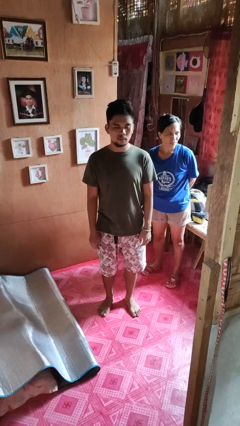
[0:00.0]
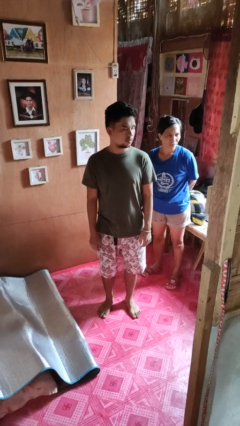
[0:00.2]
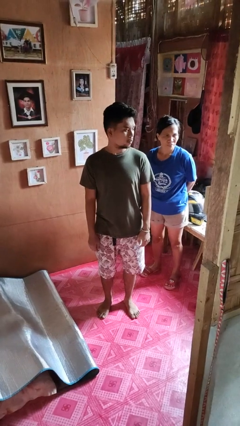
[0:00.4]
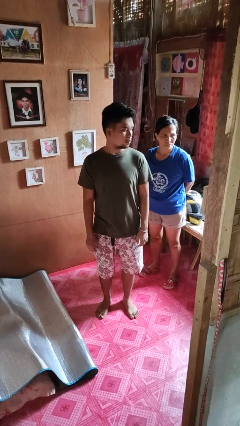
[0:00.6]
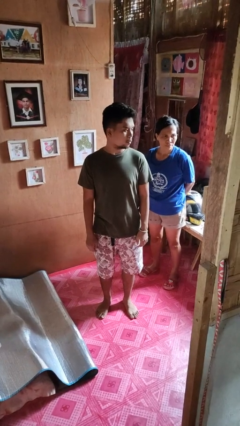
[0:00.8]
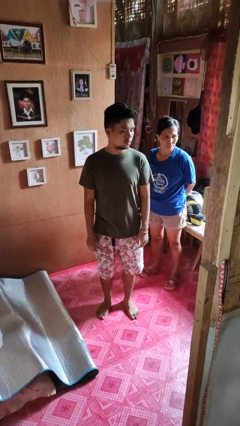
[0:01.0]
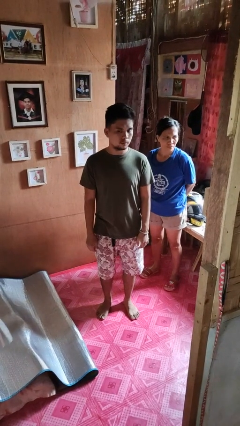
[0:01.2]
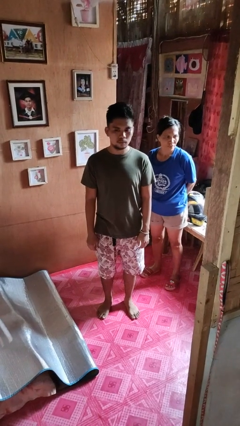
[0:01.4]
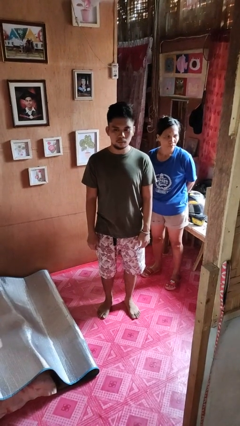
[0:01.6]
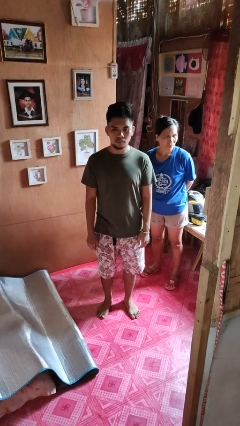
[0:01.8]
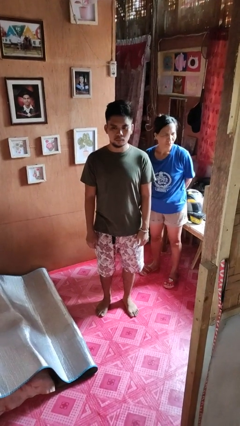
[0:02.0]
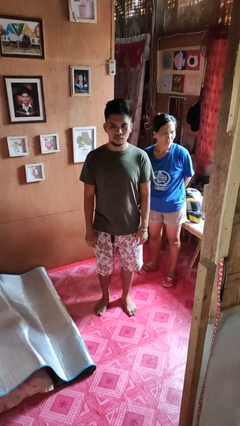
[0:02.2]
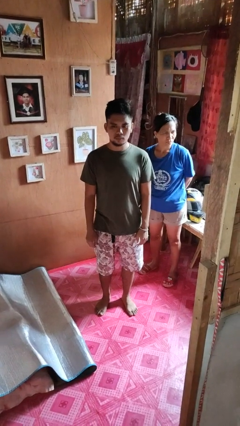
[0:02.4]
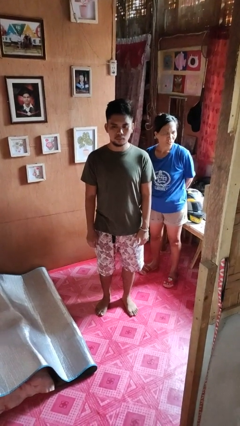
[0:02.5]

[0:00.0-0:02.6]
person looks over shoulder

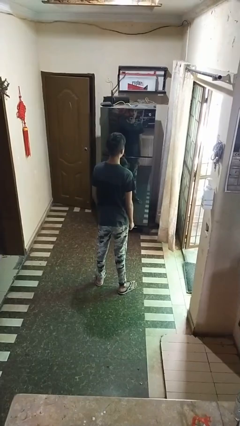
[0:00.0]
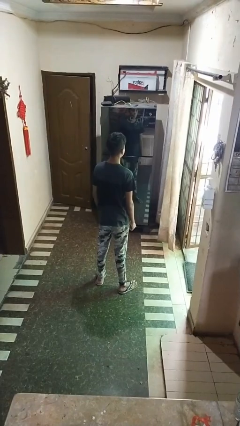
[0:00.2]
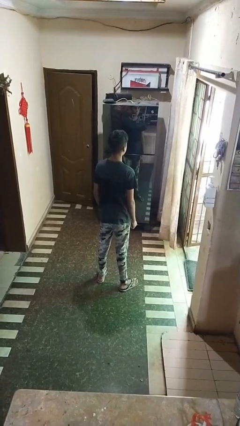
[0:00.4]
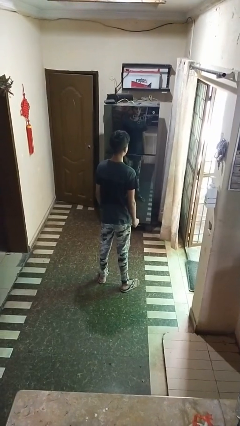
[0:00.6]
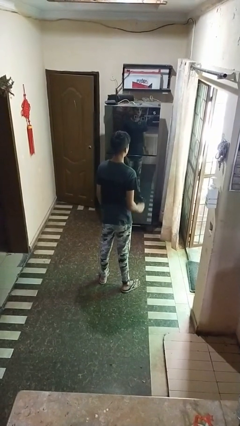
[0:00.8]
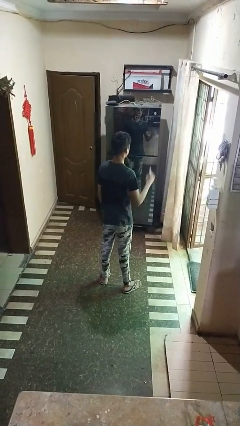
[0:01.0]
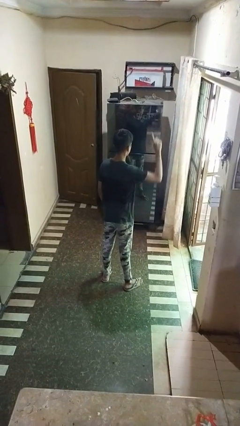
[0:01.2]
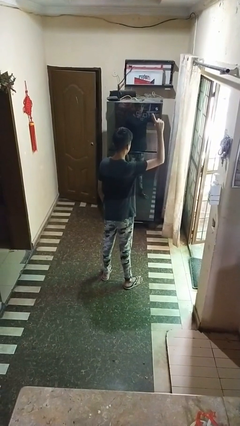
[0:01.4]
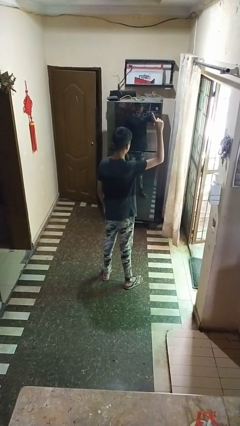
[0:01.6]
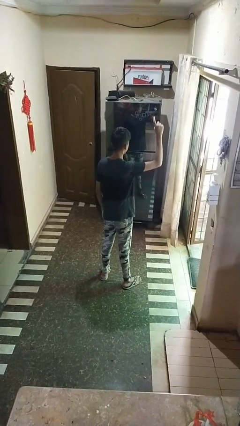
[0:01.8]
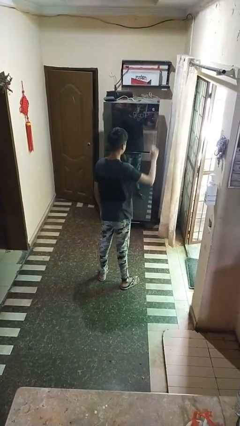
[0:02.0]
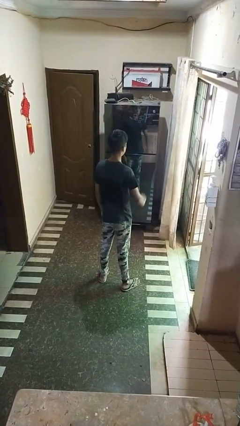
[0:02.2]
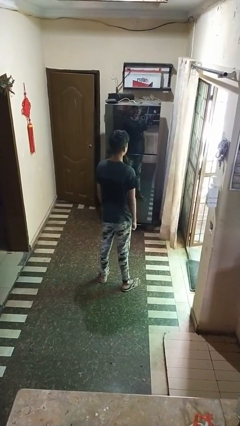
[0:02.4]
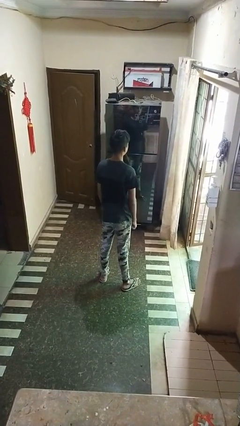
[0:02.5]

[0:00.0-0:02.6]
person gestures number one

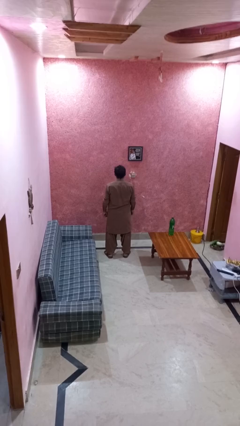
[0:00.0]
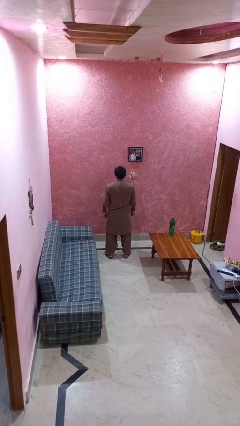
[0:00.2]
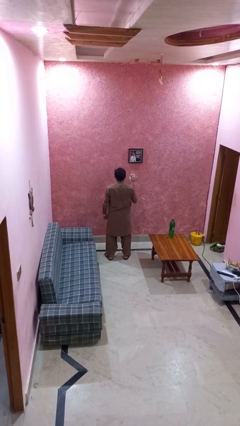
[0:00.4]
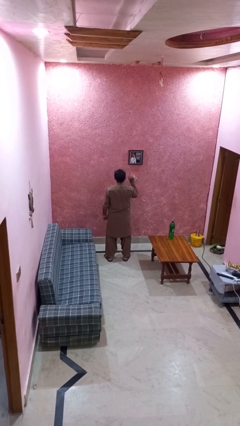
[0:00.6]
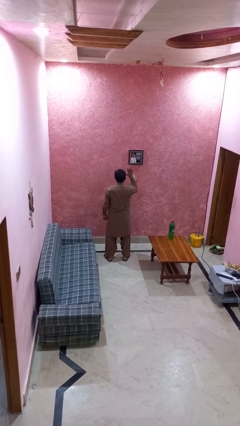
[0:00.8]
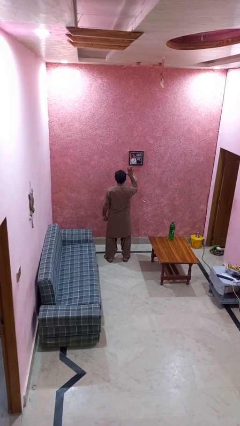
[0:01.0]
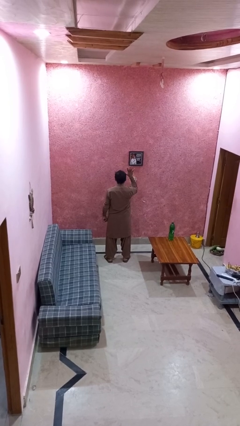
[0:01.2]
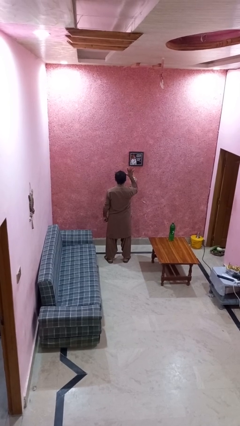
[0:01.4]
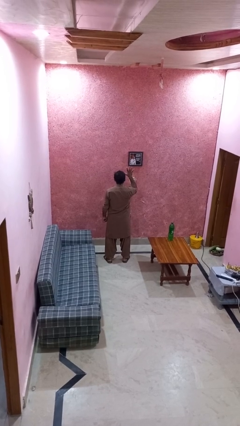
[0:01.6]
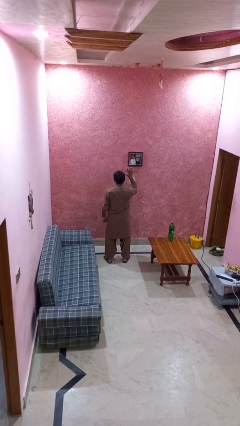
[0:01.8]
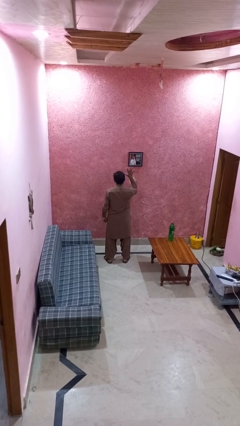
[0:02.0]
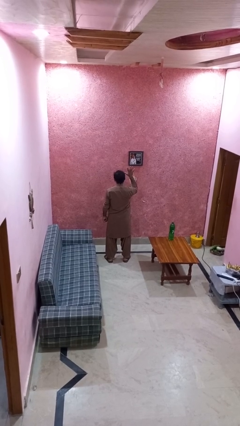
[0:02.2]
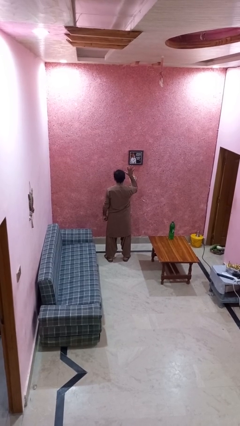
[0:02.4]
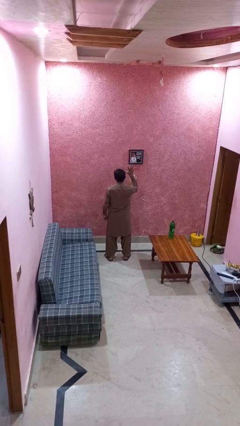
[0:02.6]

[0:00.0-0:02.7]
person gestures number five

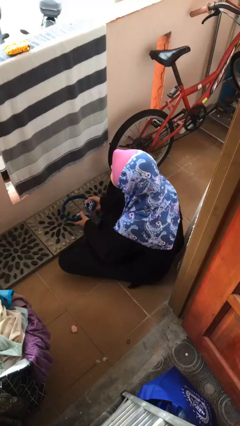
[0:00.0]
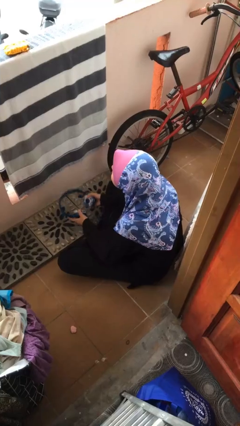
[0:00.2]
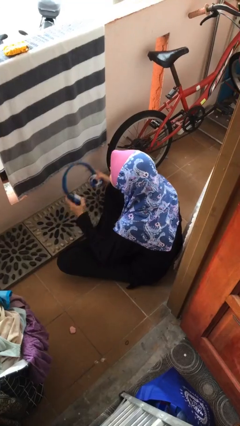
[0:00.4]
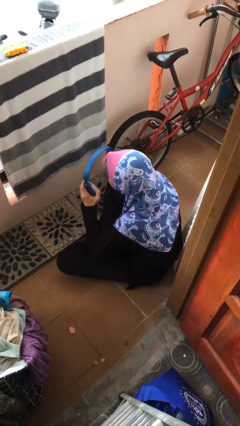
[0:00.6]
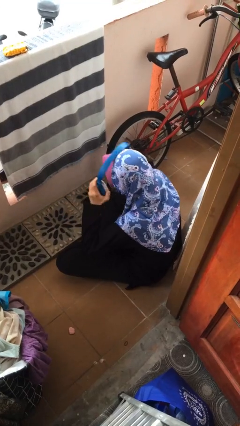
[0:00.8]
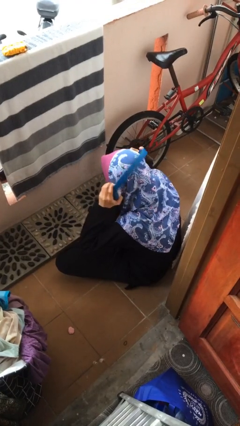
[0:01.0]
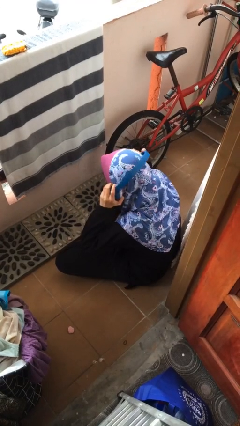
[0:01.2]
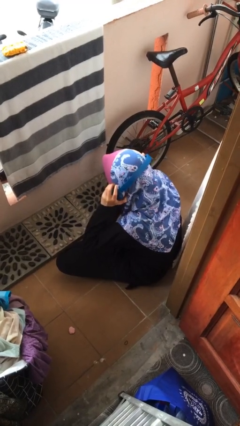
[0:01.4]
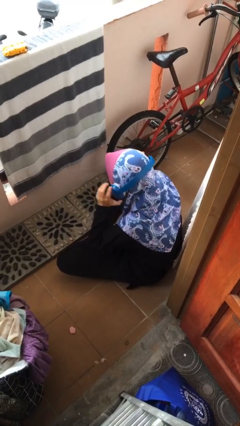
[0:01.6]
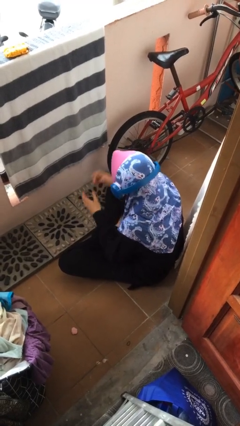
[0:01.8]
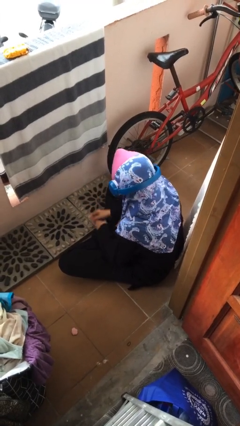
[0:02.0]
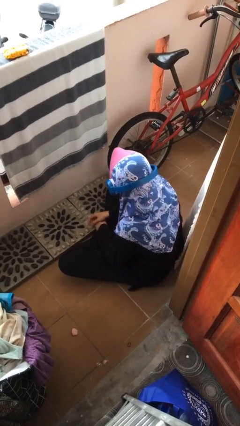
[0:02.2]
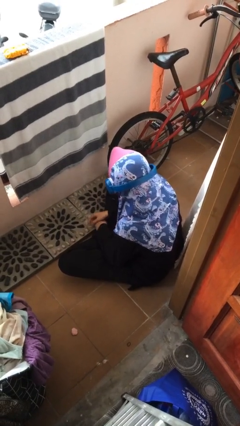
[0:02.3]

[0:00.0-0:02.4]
person puts on headphones

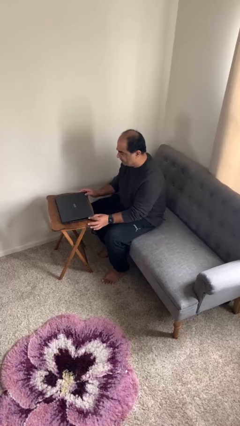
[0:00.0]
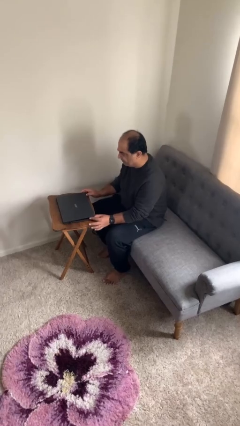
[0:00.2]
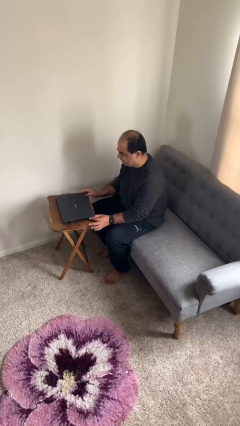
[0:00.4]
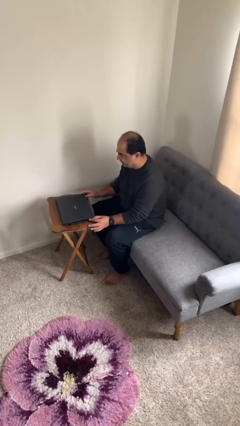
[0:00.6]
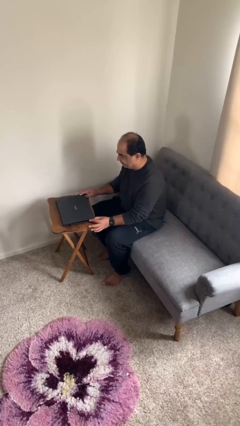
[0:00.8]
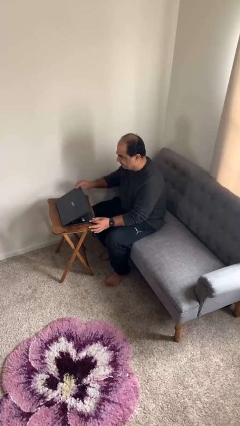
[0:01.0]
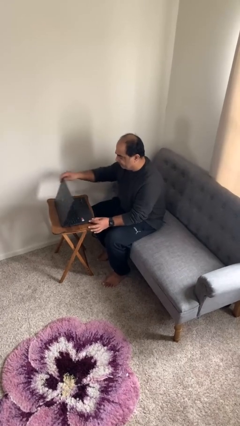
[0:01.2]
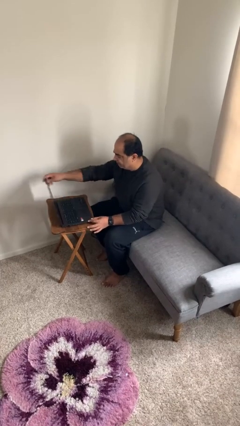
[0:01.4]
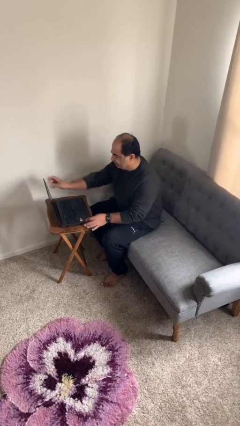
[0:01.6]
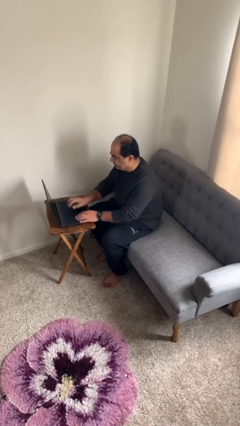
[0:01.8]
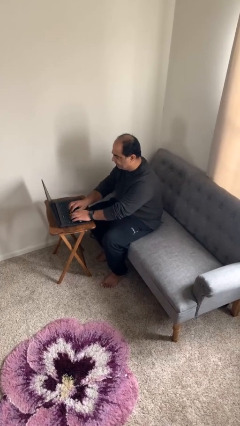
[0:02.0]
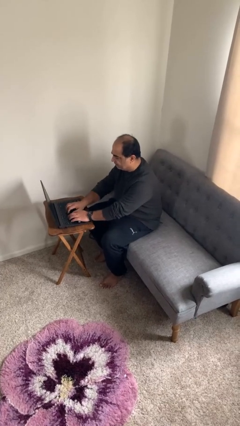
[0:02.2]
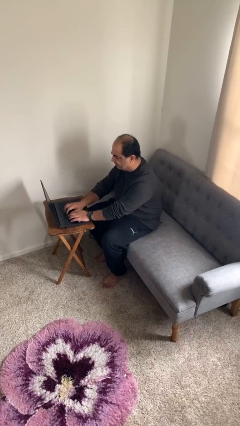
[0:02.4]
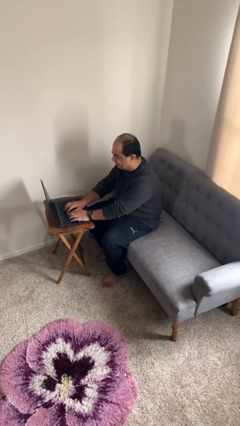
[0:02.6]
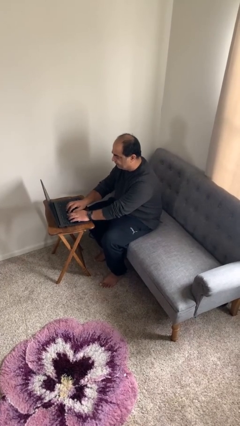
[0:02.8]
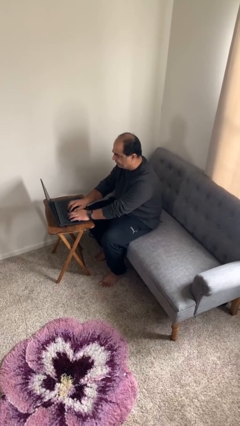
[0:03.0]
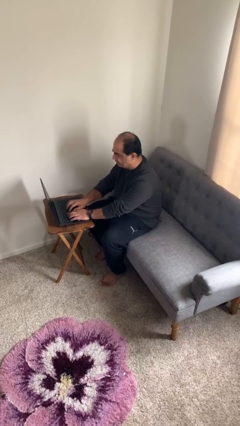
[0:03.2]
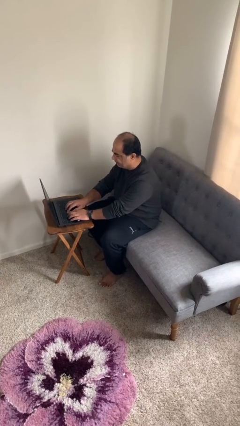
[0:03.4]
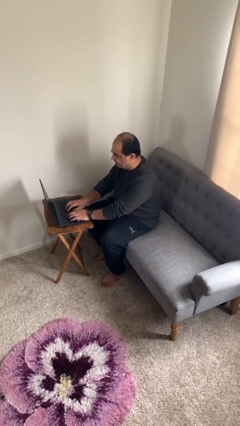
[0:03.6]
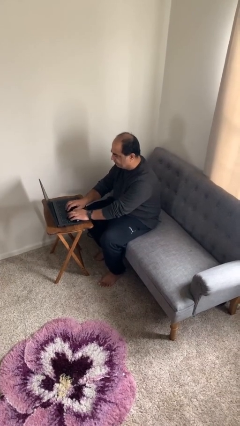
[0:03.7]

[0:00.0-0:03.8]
person interacts with laptop

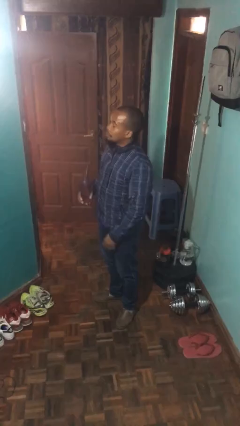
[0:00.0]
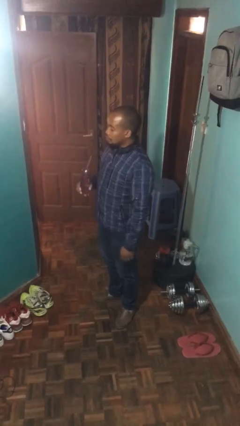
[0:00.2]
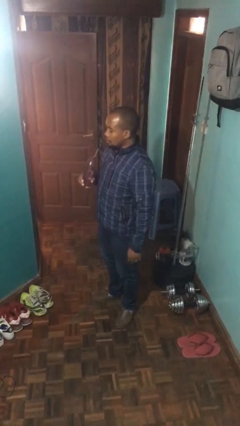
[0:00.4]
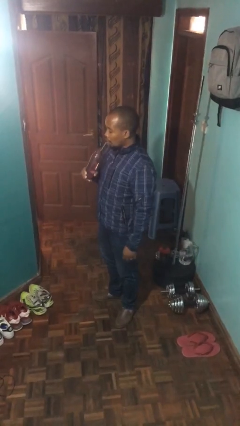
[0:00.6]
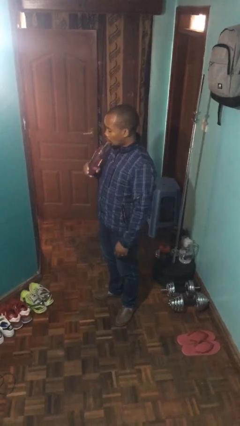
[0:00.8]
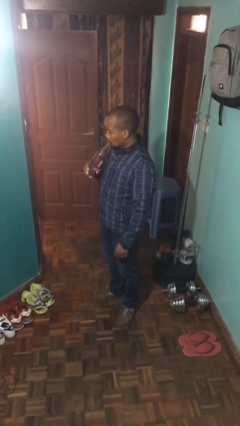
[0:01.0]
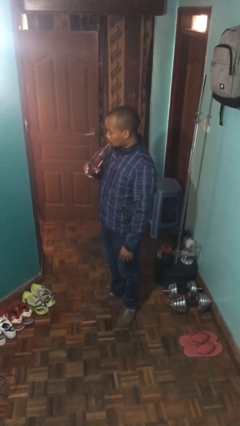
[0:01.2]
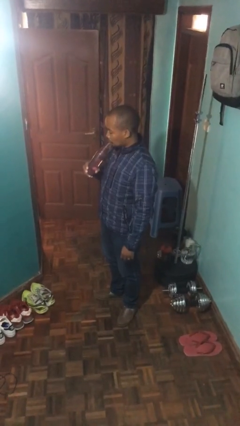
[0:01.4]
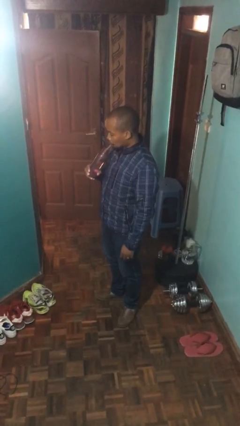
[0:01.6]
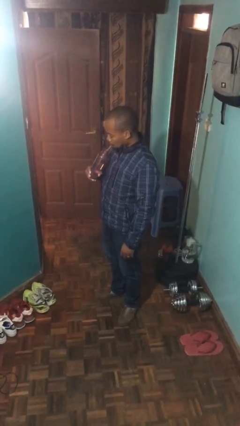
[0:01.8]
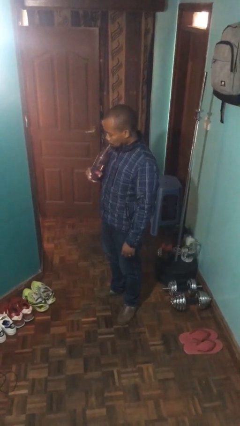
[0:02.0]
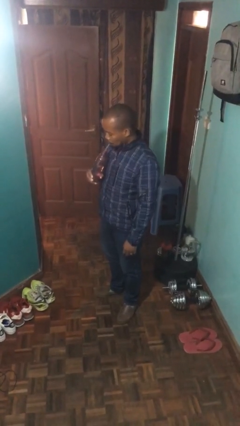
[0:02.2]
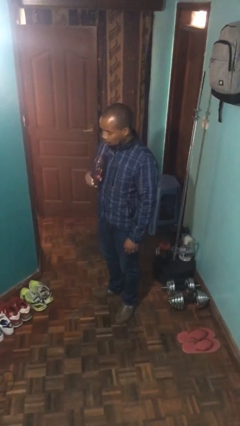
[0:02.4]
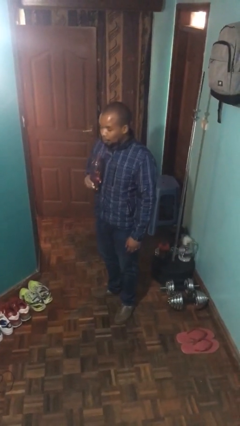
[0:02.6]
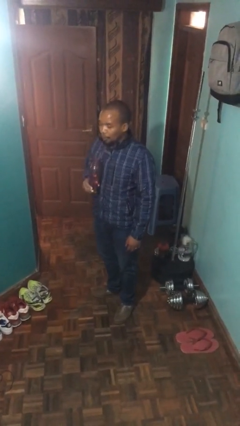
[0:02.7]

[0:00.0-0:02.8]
person drinks from straw

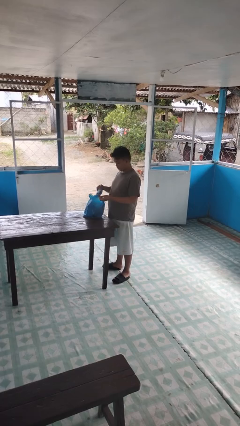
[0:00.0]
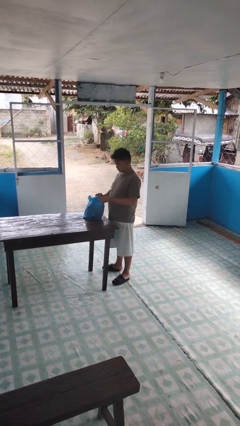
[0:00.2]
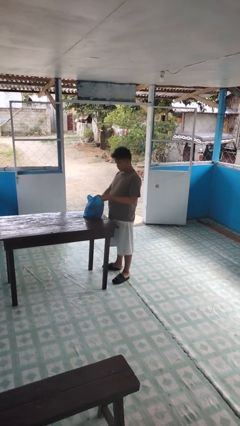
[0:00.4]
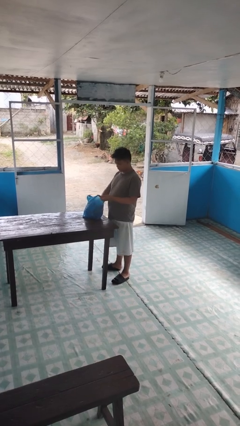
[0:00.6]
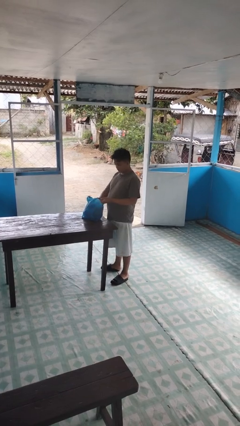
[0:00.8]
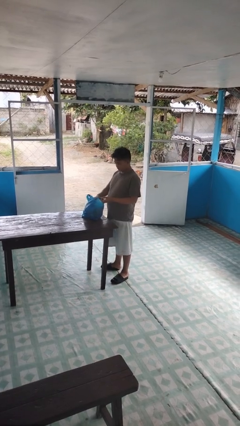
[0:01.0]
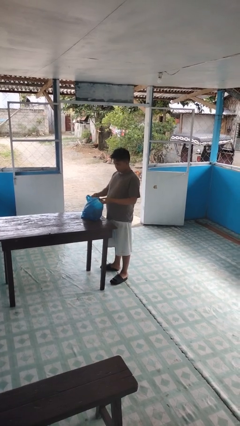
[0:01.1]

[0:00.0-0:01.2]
person puts object into bag
